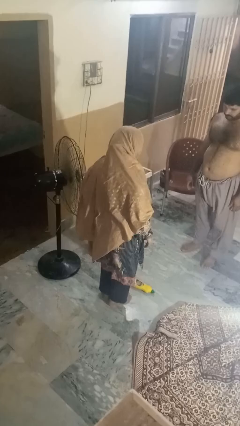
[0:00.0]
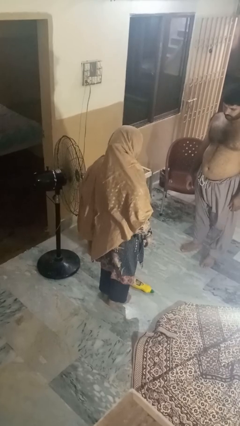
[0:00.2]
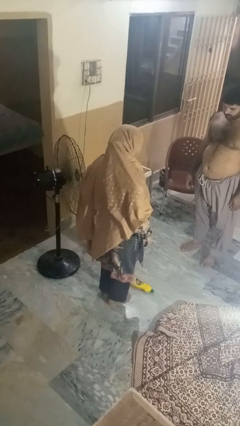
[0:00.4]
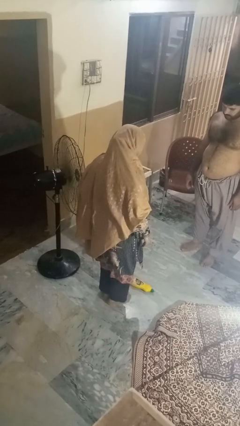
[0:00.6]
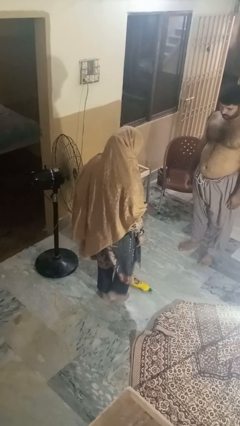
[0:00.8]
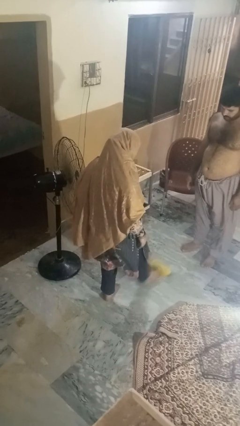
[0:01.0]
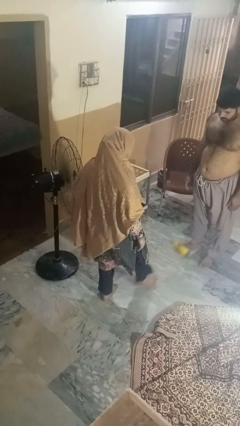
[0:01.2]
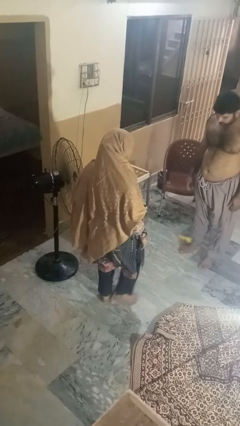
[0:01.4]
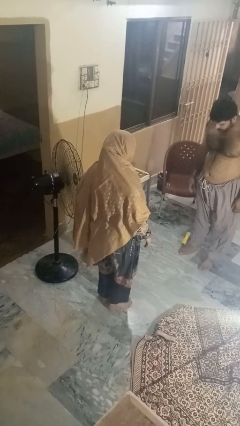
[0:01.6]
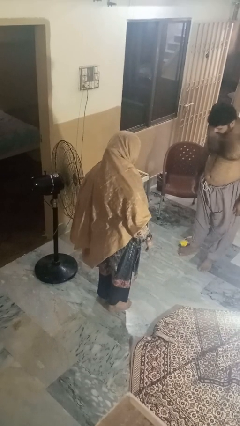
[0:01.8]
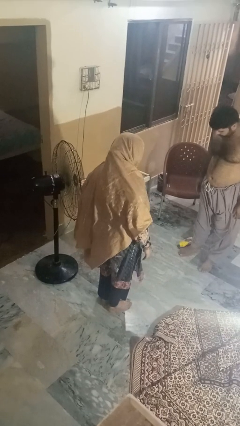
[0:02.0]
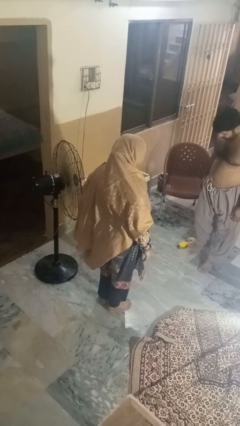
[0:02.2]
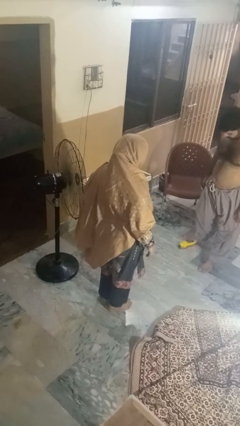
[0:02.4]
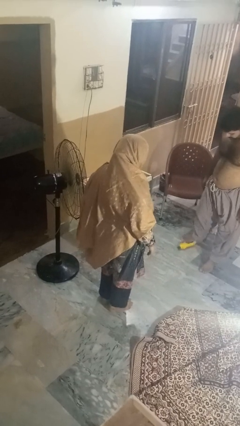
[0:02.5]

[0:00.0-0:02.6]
person kicks object to person

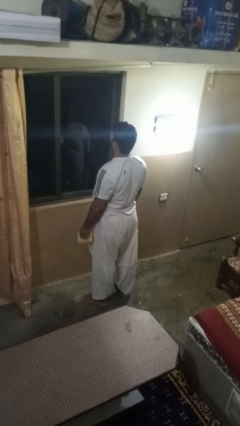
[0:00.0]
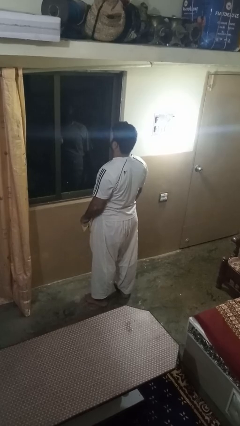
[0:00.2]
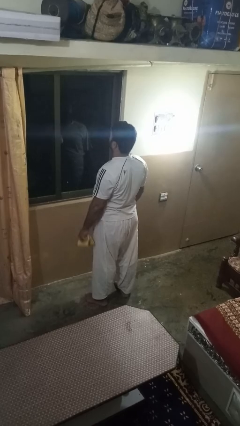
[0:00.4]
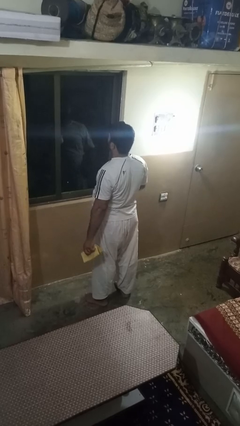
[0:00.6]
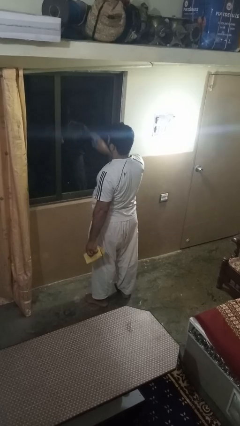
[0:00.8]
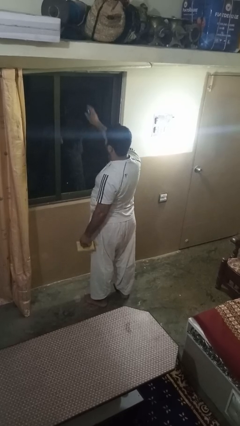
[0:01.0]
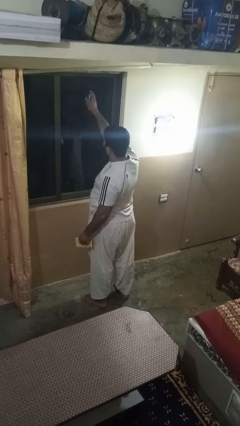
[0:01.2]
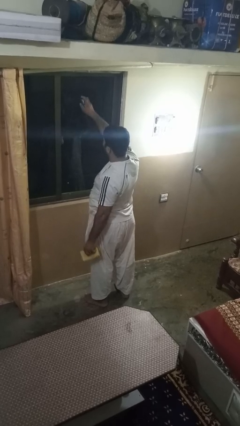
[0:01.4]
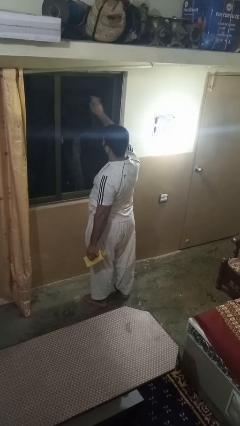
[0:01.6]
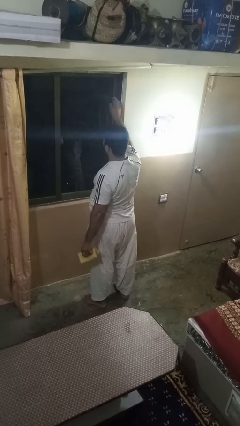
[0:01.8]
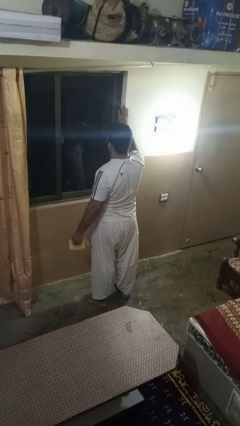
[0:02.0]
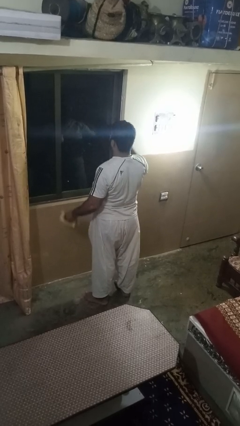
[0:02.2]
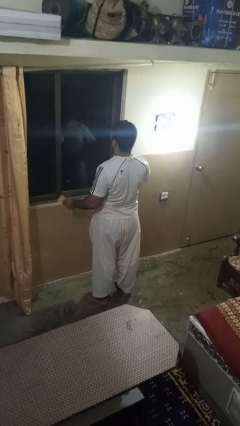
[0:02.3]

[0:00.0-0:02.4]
person sprays from bottle

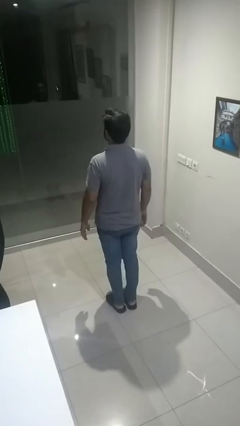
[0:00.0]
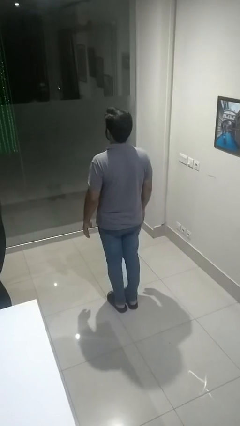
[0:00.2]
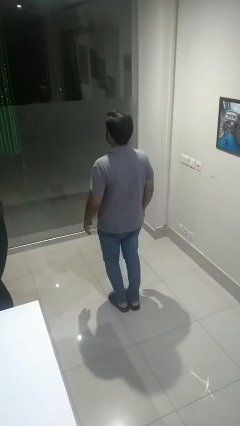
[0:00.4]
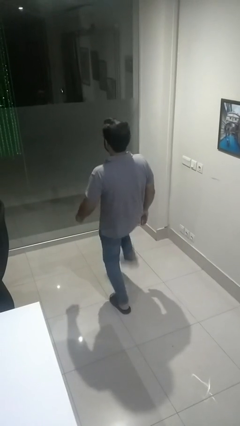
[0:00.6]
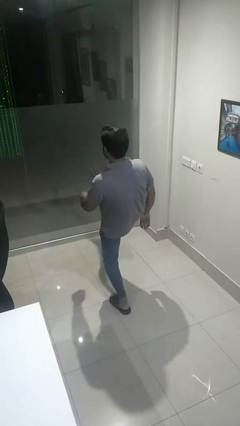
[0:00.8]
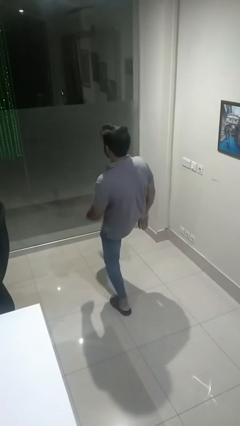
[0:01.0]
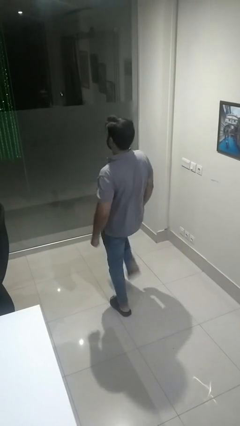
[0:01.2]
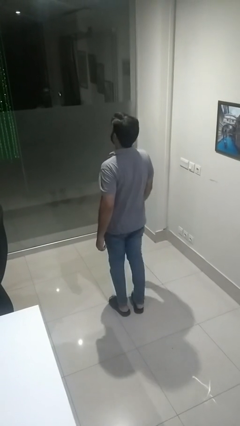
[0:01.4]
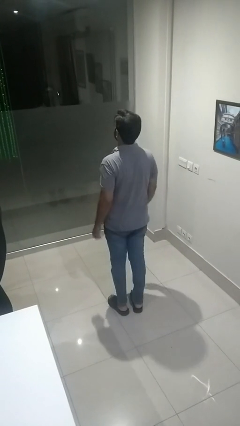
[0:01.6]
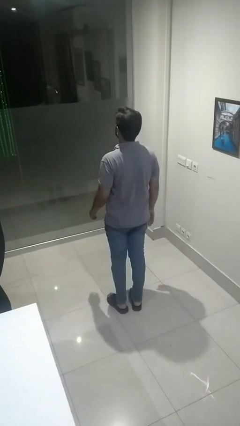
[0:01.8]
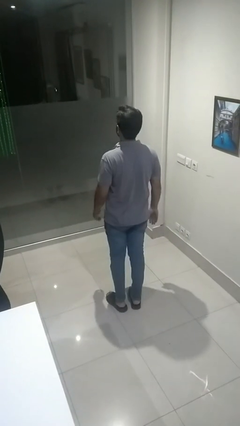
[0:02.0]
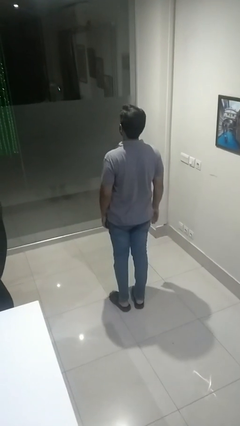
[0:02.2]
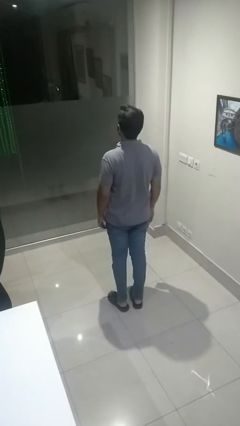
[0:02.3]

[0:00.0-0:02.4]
person karate kicks

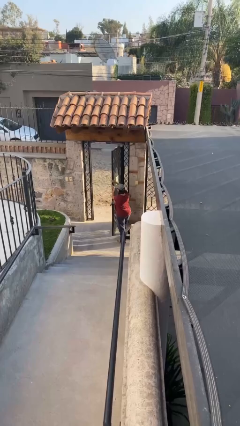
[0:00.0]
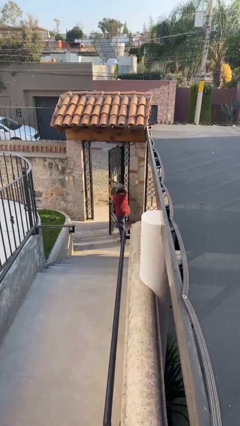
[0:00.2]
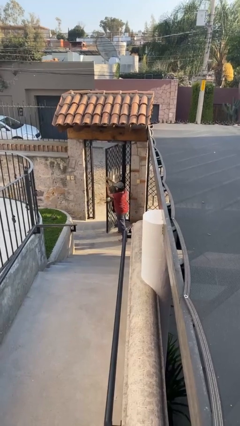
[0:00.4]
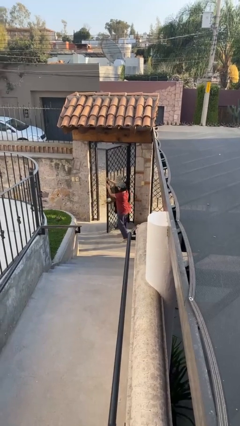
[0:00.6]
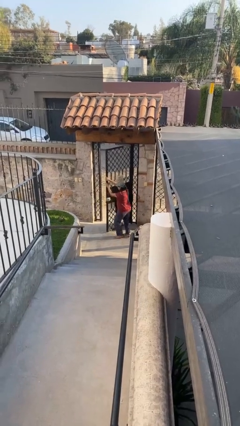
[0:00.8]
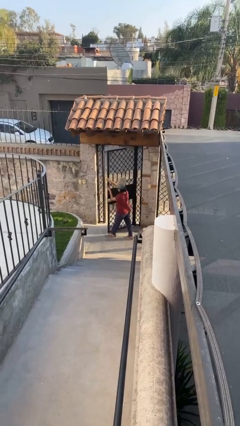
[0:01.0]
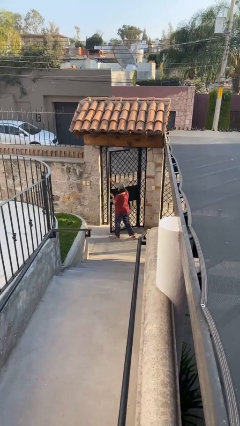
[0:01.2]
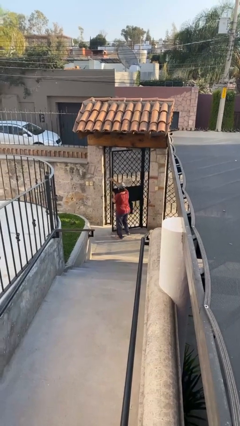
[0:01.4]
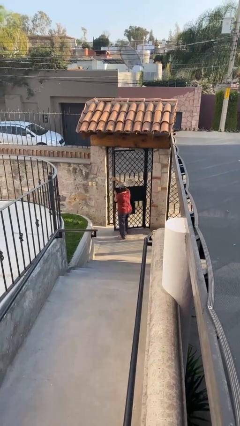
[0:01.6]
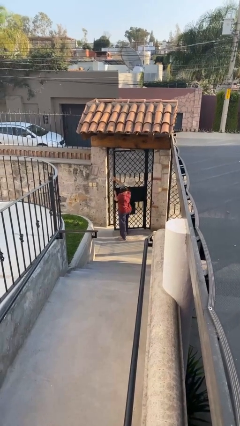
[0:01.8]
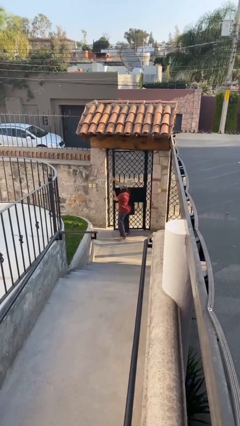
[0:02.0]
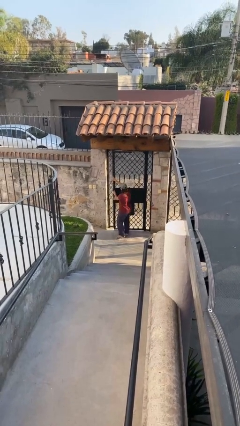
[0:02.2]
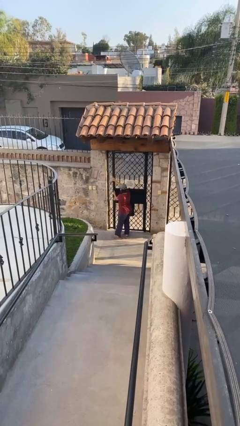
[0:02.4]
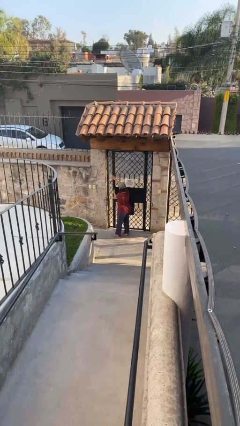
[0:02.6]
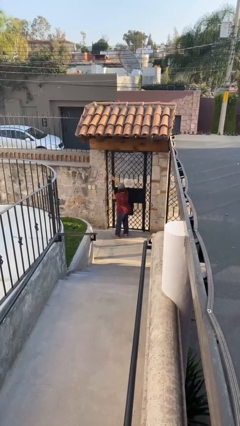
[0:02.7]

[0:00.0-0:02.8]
person closes facility door

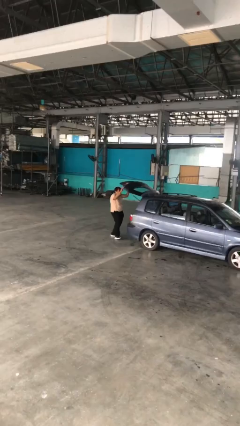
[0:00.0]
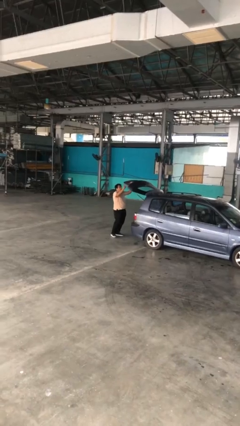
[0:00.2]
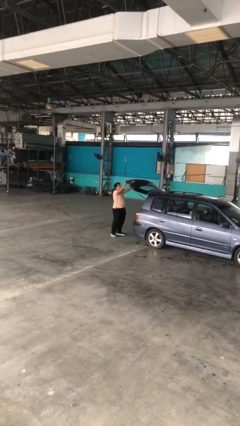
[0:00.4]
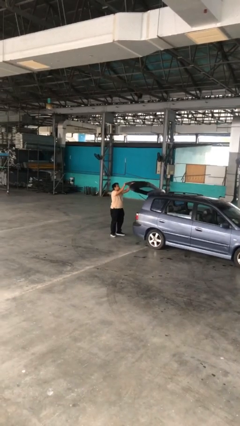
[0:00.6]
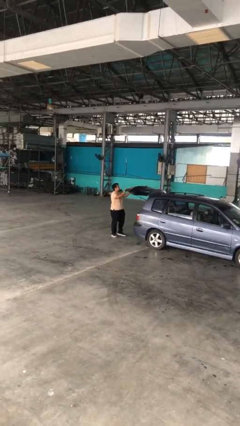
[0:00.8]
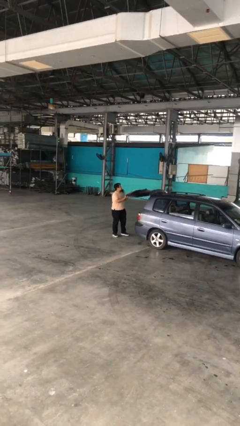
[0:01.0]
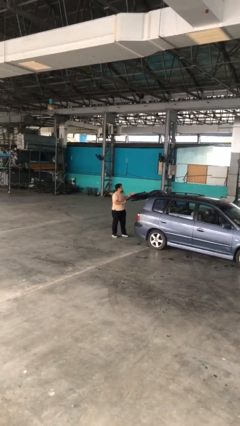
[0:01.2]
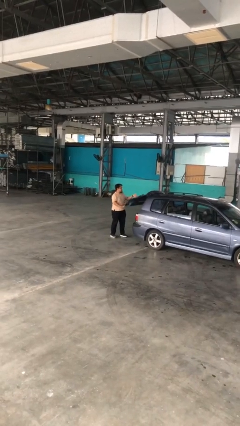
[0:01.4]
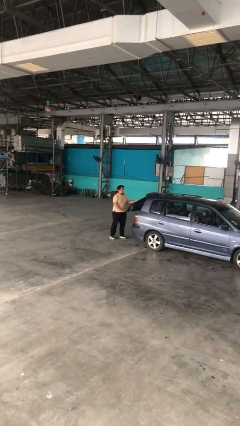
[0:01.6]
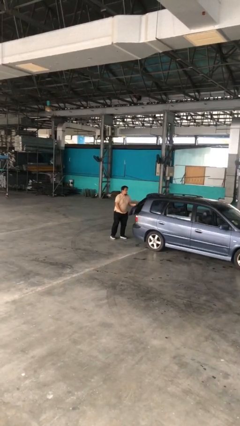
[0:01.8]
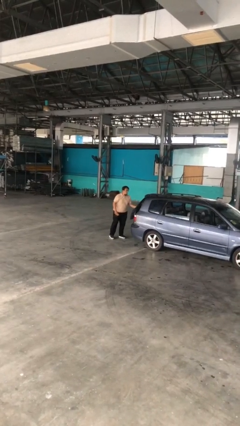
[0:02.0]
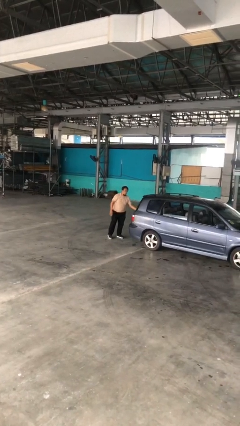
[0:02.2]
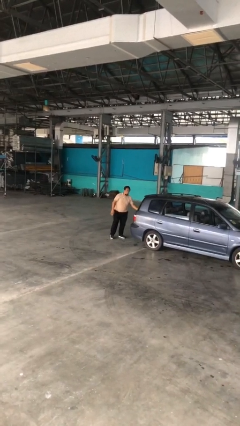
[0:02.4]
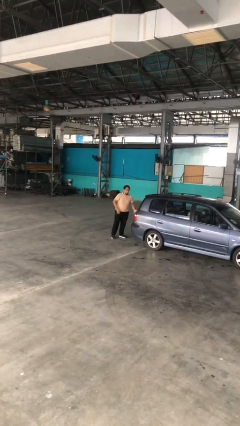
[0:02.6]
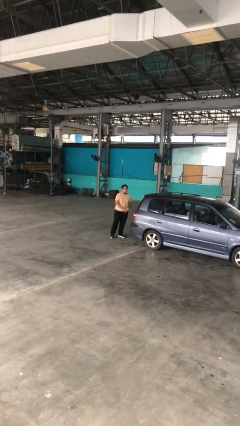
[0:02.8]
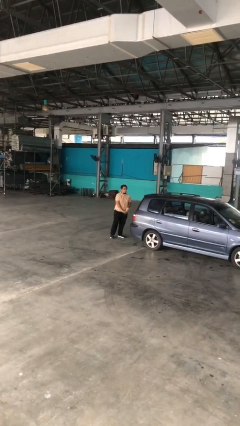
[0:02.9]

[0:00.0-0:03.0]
person closes car trunk

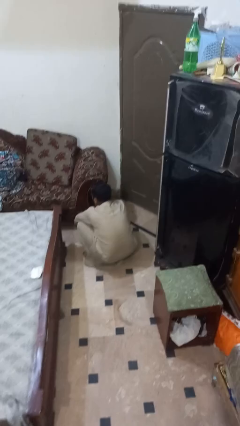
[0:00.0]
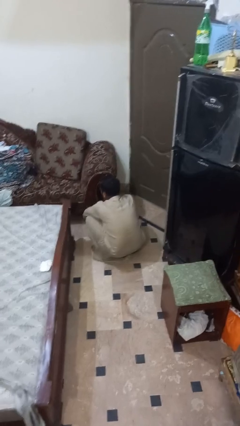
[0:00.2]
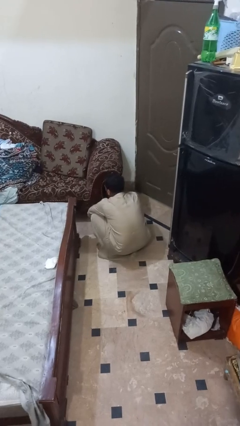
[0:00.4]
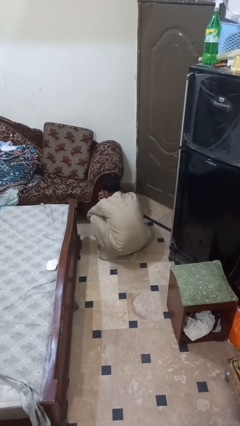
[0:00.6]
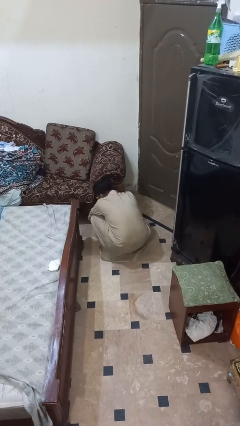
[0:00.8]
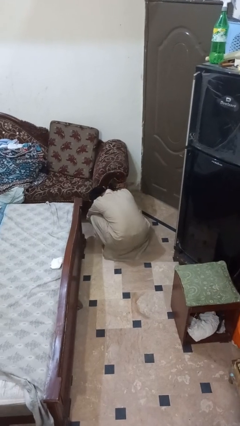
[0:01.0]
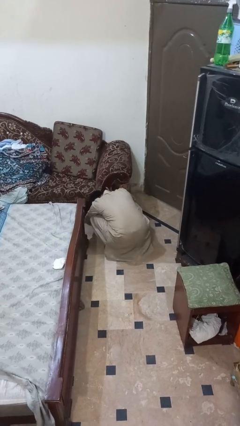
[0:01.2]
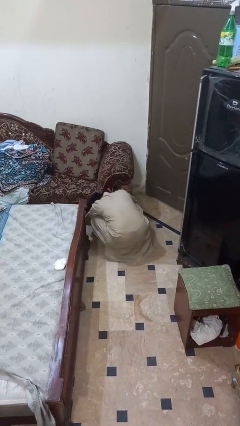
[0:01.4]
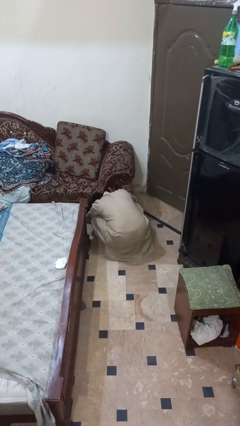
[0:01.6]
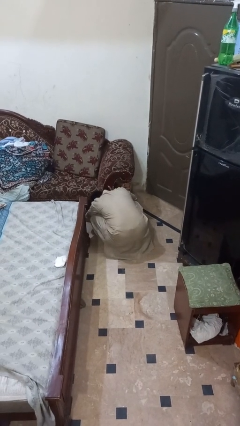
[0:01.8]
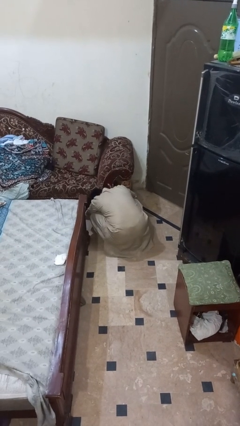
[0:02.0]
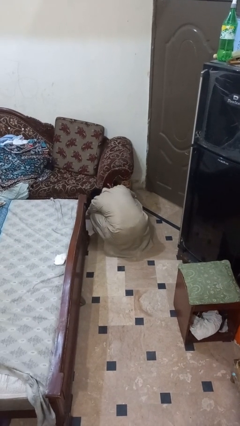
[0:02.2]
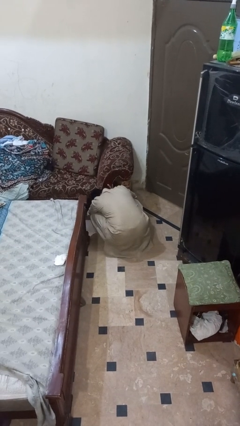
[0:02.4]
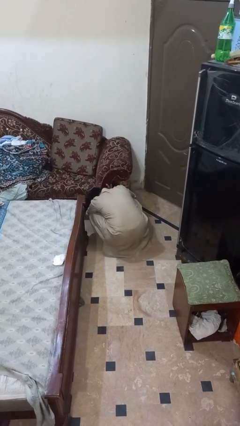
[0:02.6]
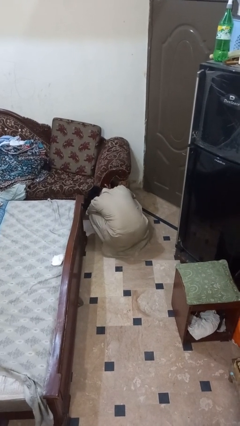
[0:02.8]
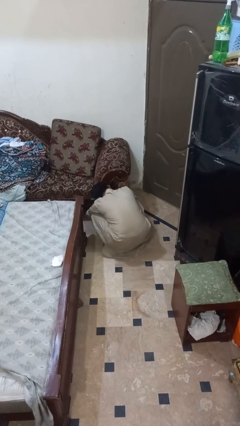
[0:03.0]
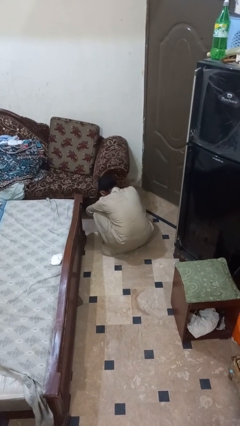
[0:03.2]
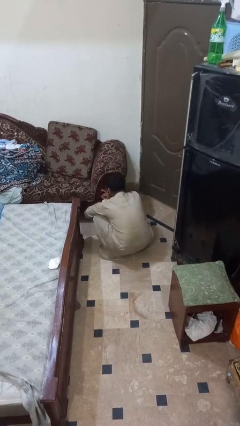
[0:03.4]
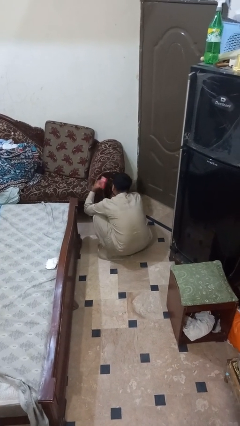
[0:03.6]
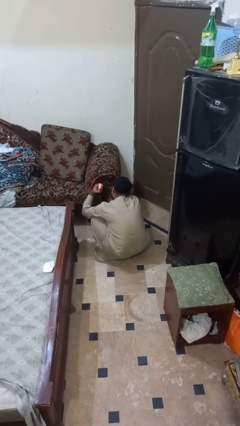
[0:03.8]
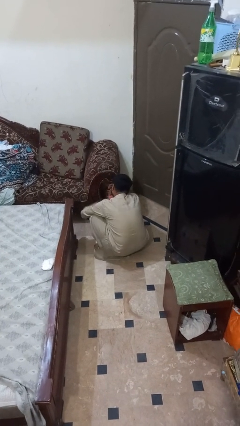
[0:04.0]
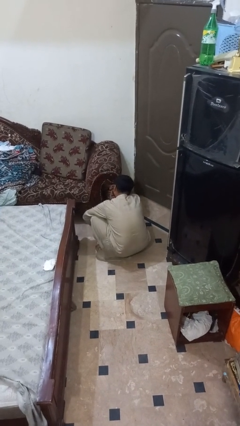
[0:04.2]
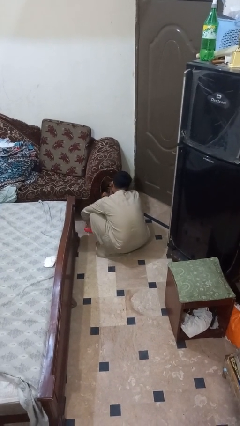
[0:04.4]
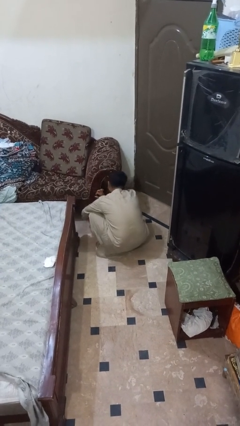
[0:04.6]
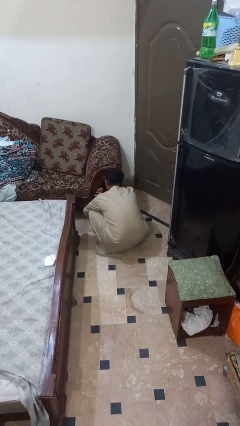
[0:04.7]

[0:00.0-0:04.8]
person searches under couch
